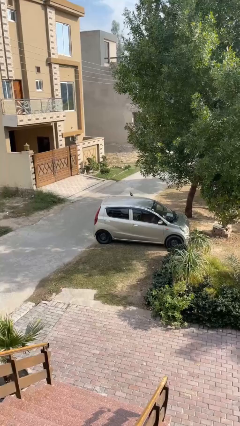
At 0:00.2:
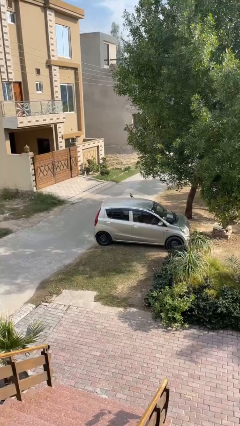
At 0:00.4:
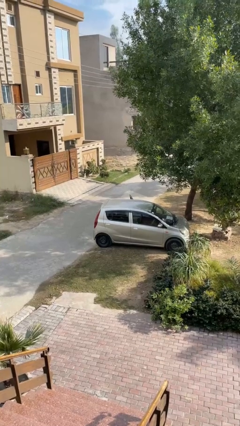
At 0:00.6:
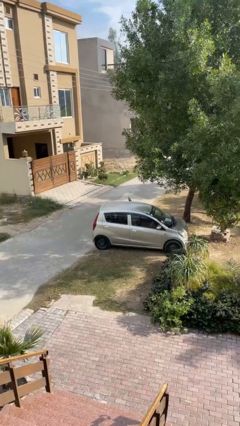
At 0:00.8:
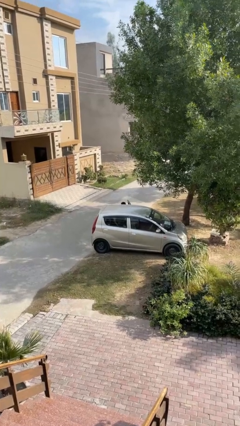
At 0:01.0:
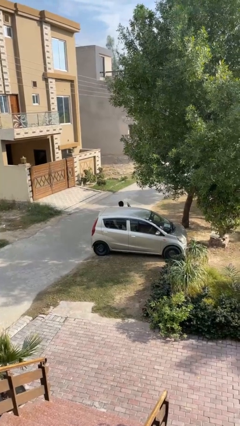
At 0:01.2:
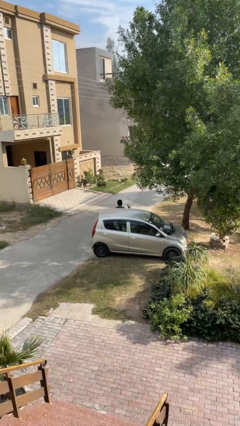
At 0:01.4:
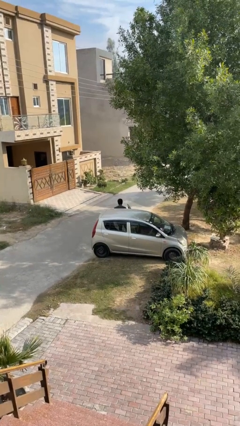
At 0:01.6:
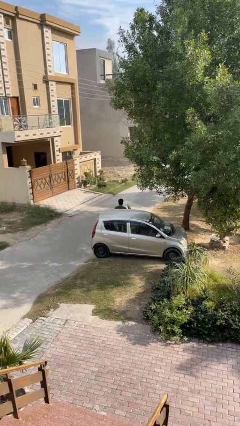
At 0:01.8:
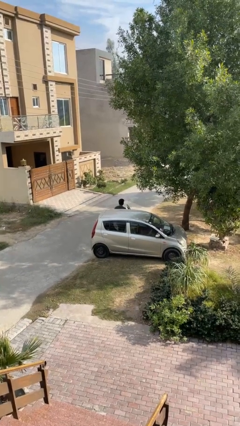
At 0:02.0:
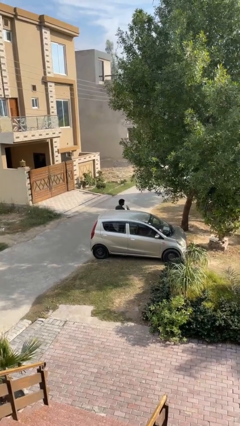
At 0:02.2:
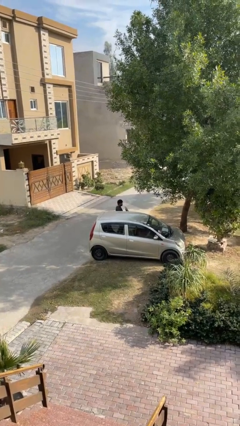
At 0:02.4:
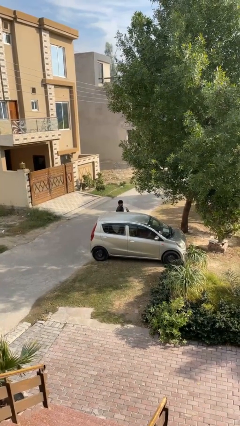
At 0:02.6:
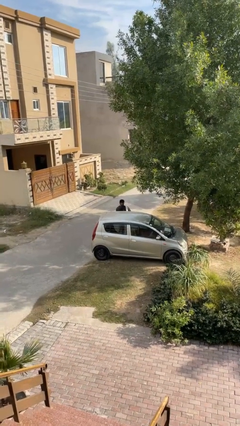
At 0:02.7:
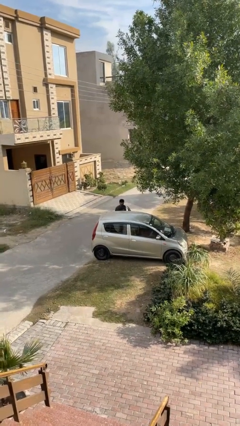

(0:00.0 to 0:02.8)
person exits car

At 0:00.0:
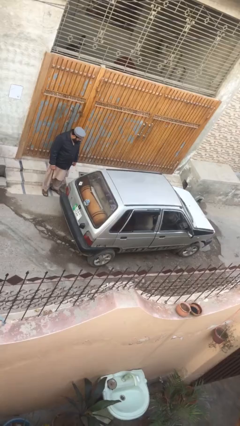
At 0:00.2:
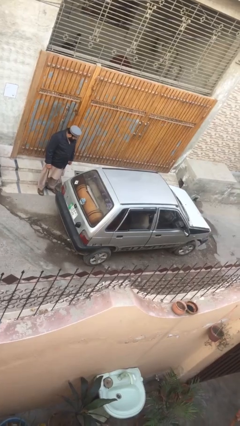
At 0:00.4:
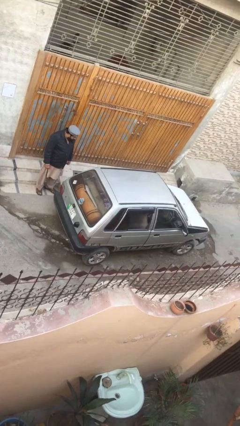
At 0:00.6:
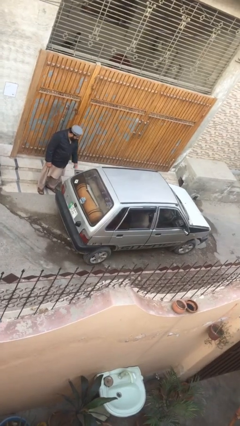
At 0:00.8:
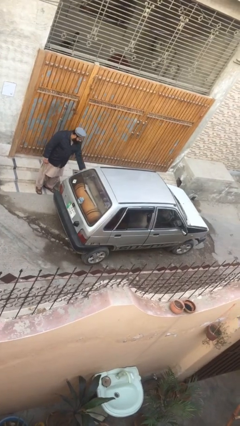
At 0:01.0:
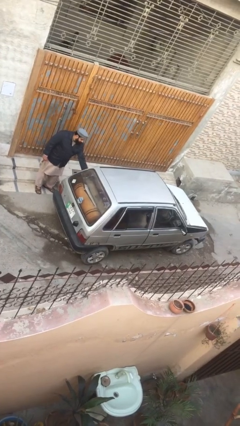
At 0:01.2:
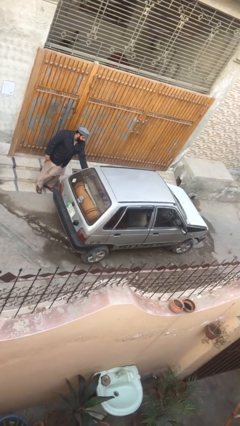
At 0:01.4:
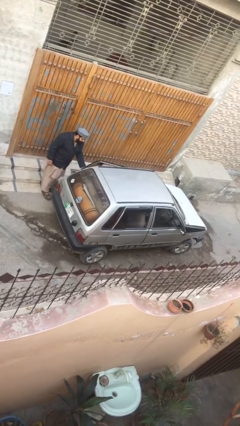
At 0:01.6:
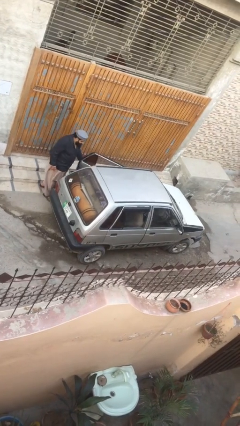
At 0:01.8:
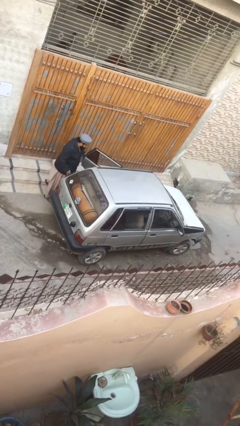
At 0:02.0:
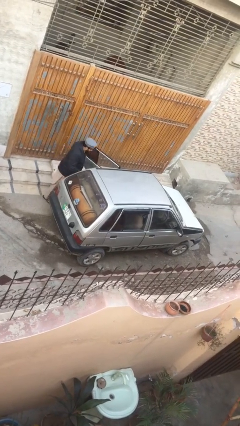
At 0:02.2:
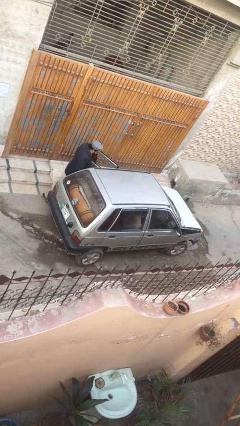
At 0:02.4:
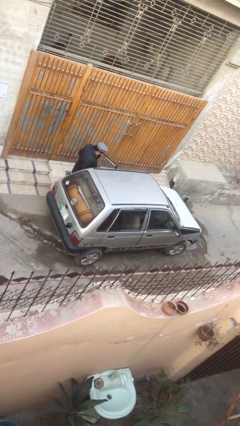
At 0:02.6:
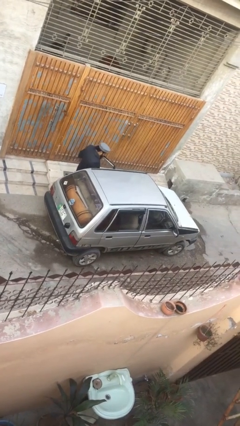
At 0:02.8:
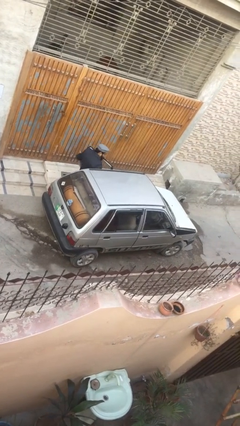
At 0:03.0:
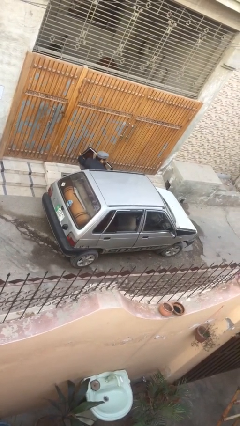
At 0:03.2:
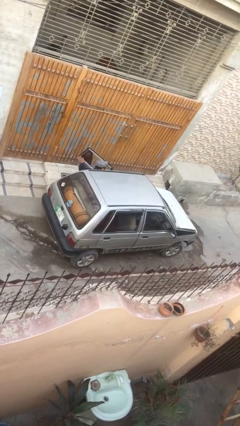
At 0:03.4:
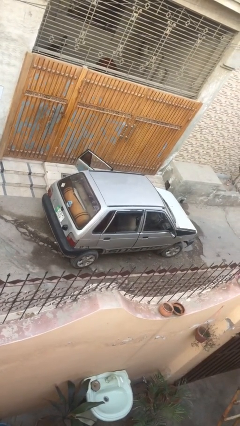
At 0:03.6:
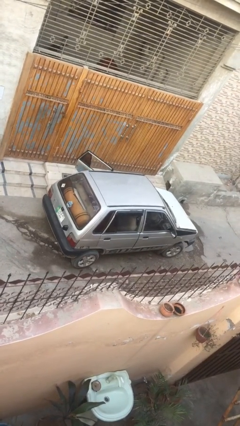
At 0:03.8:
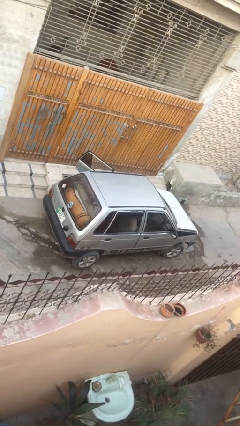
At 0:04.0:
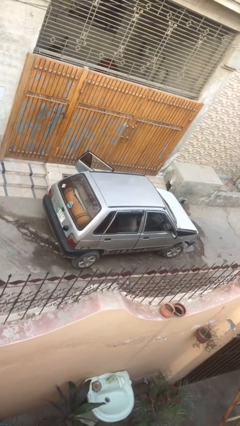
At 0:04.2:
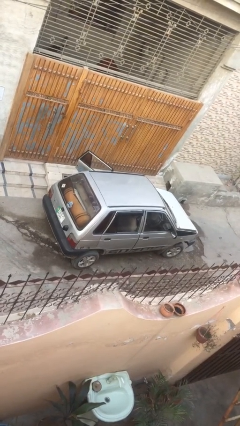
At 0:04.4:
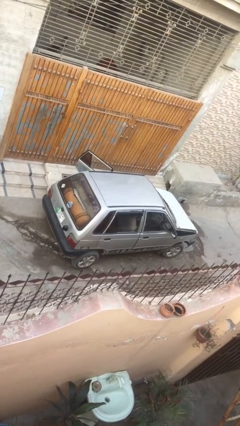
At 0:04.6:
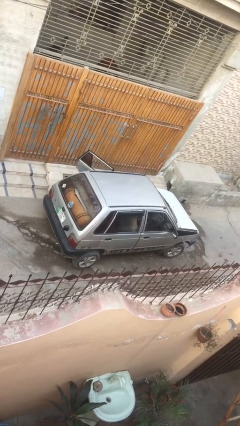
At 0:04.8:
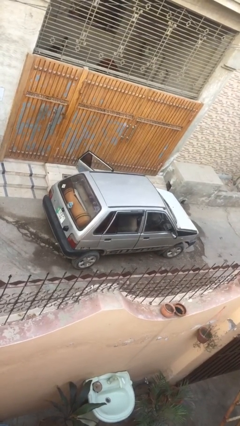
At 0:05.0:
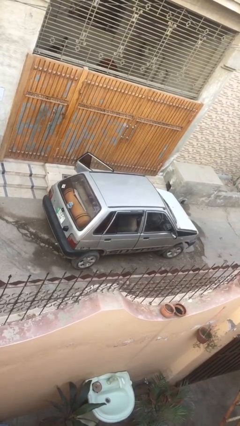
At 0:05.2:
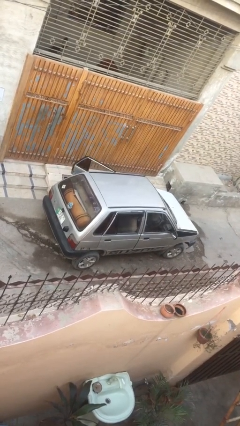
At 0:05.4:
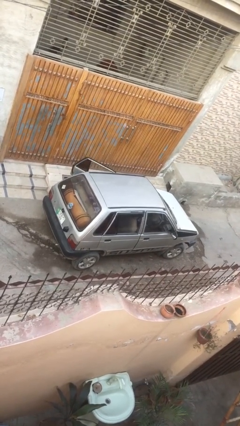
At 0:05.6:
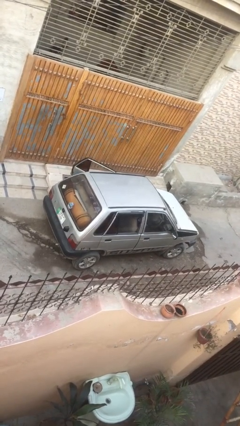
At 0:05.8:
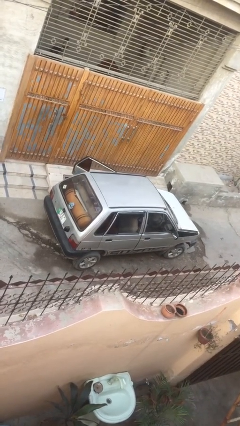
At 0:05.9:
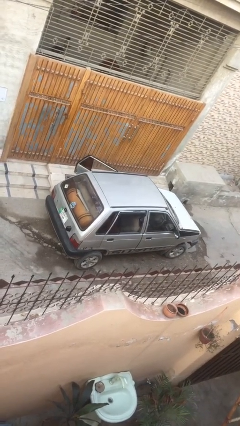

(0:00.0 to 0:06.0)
car picks up person

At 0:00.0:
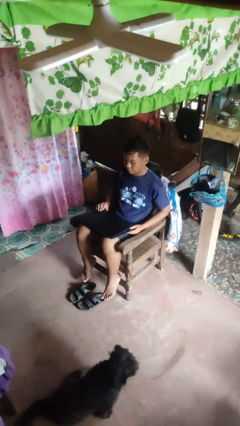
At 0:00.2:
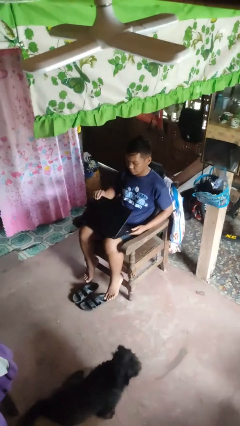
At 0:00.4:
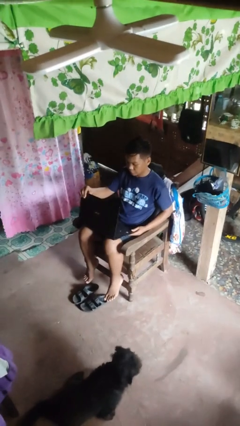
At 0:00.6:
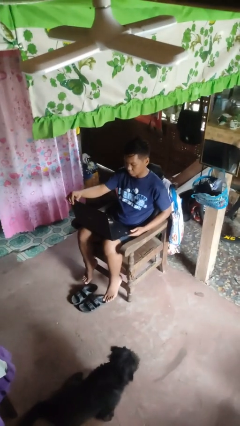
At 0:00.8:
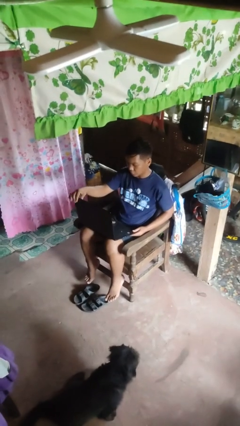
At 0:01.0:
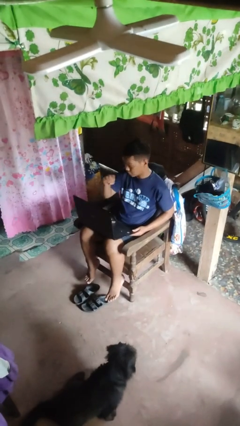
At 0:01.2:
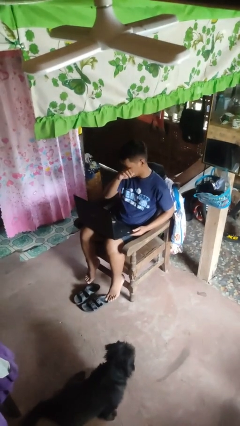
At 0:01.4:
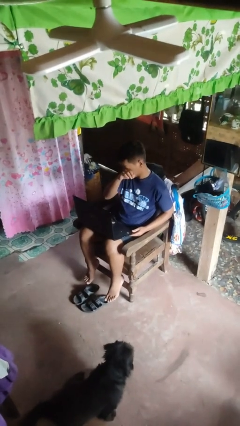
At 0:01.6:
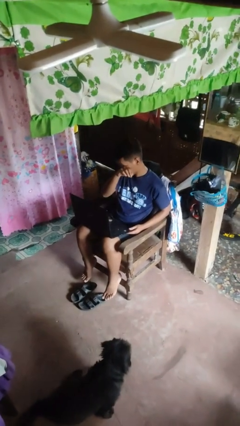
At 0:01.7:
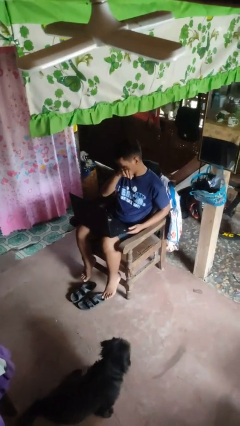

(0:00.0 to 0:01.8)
person opens laptop

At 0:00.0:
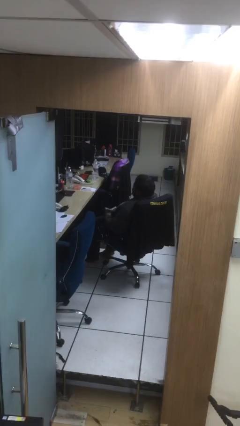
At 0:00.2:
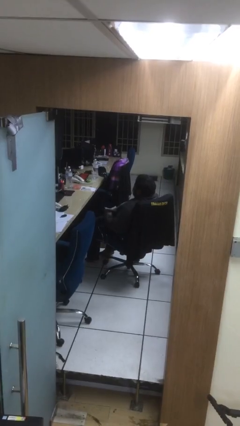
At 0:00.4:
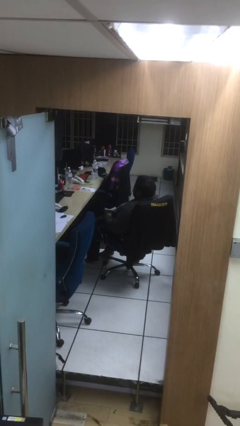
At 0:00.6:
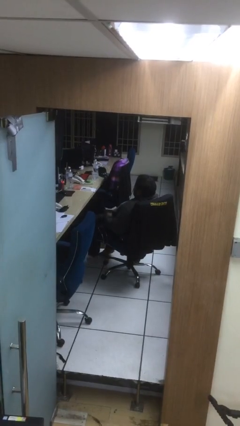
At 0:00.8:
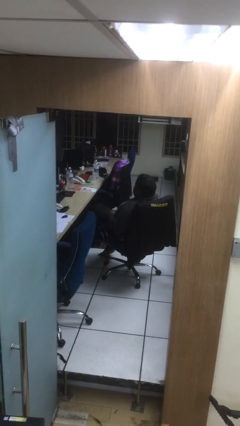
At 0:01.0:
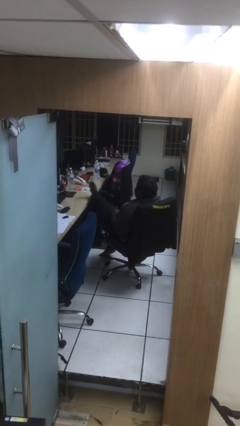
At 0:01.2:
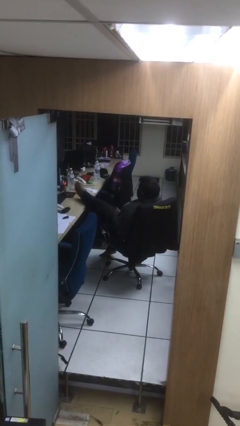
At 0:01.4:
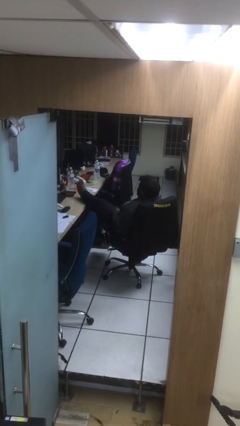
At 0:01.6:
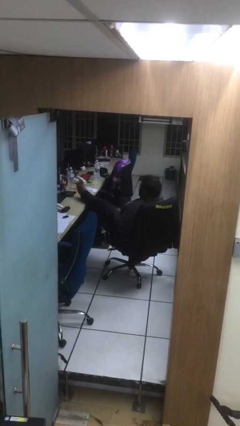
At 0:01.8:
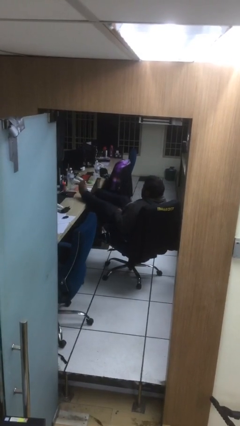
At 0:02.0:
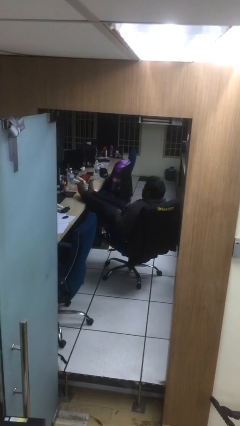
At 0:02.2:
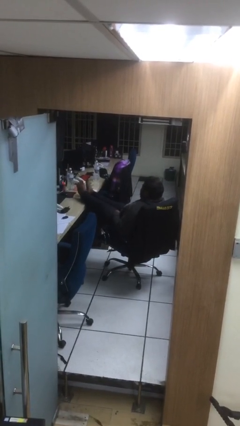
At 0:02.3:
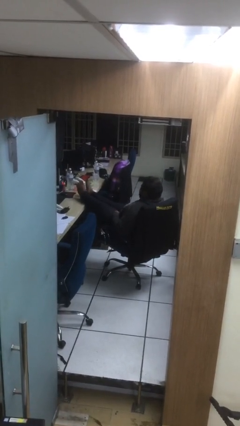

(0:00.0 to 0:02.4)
person puts feet up

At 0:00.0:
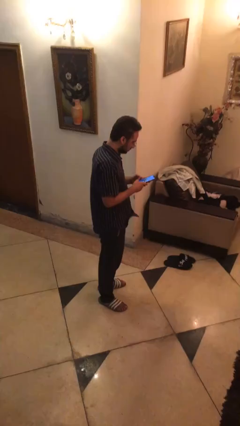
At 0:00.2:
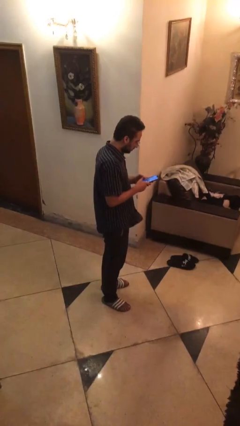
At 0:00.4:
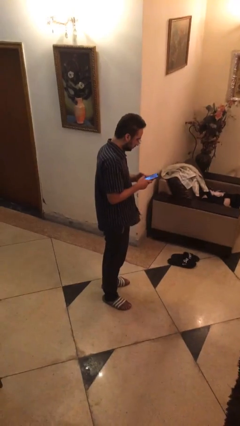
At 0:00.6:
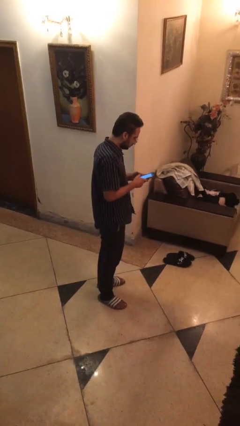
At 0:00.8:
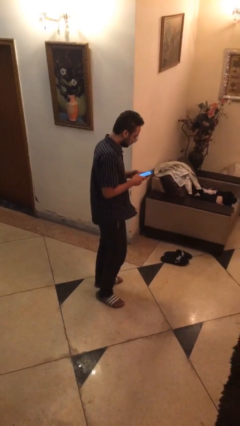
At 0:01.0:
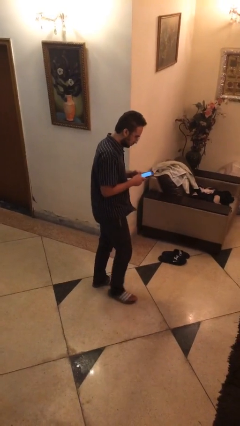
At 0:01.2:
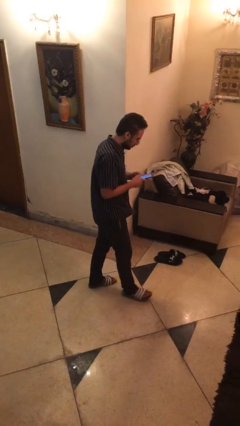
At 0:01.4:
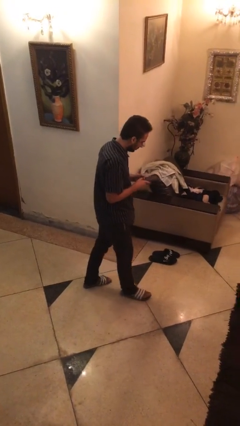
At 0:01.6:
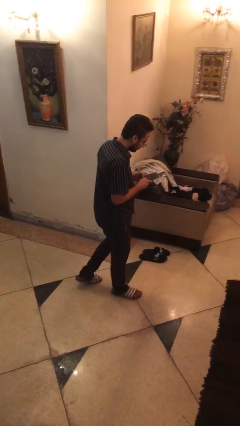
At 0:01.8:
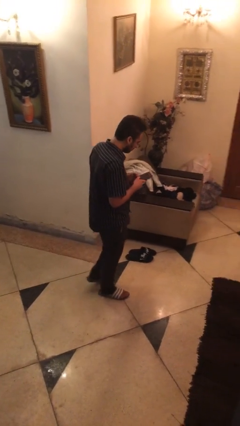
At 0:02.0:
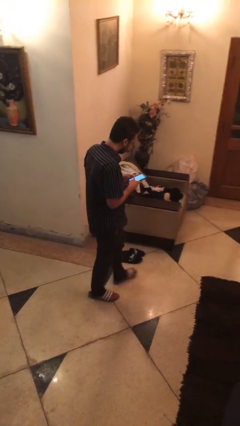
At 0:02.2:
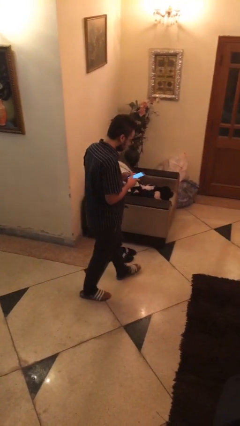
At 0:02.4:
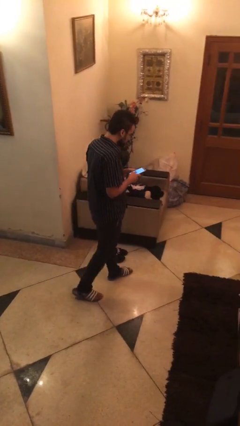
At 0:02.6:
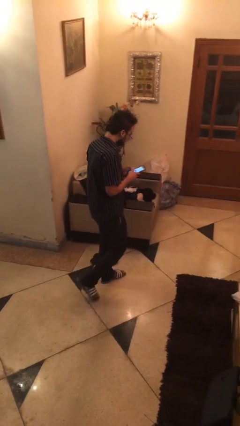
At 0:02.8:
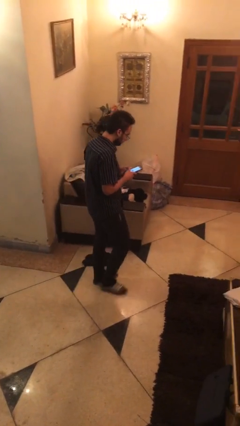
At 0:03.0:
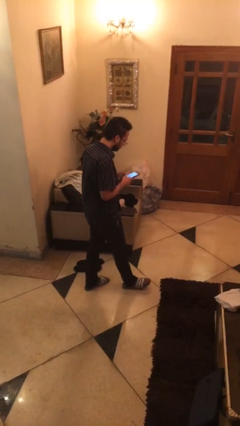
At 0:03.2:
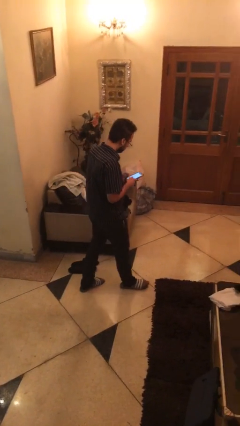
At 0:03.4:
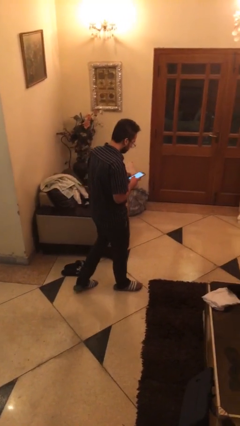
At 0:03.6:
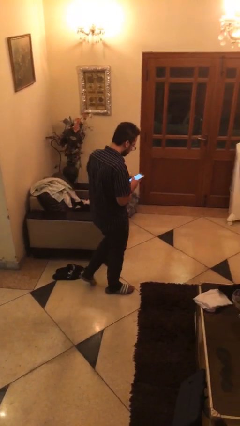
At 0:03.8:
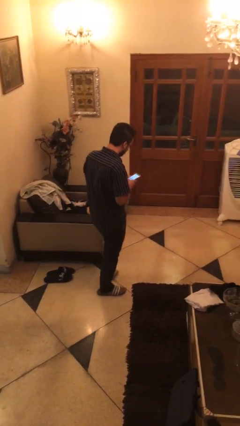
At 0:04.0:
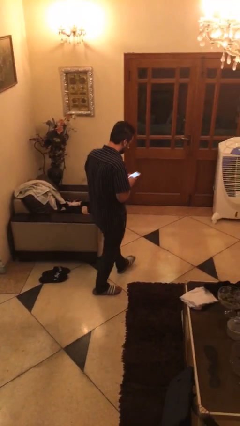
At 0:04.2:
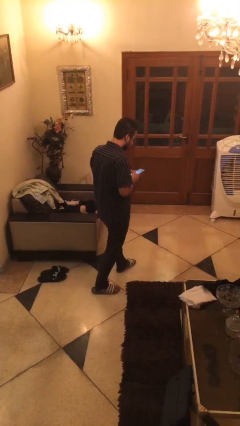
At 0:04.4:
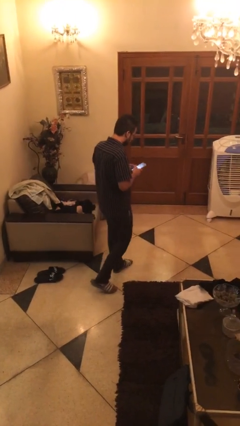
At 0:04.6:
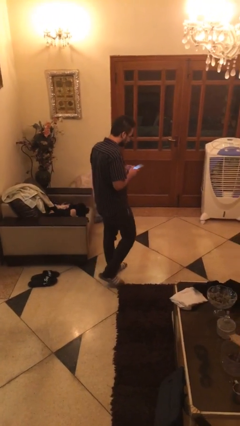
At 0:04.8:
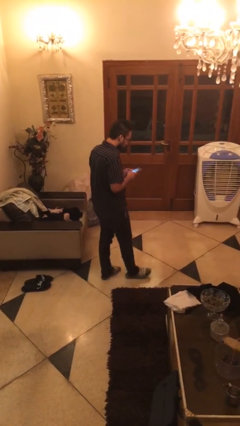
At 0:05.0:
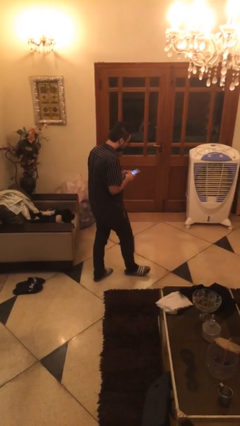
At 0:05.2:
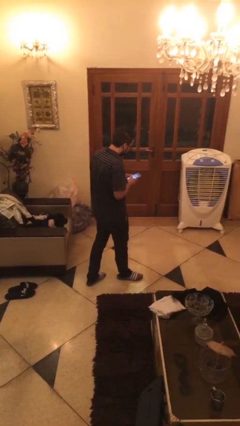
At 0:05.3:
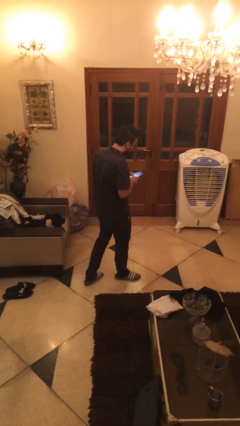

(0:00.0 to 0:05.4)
person texts on phone
